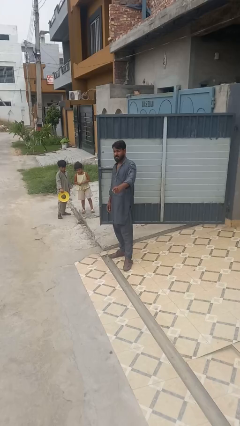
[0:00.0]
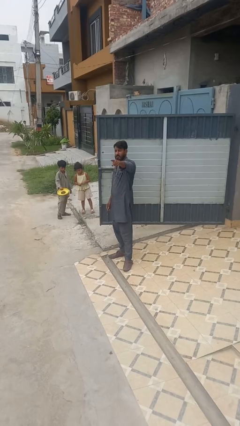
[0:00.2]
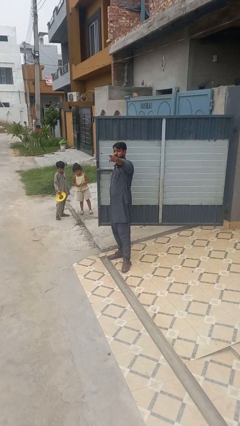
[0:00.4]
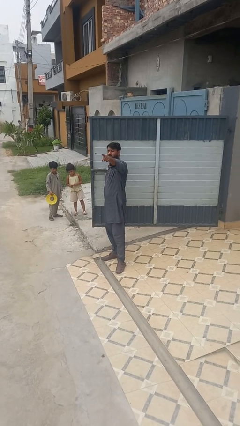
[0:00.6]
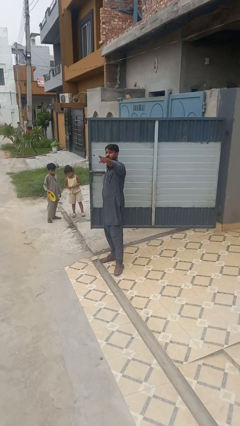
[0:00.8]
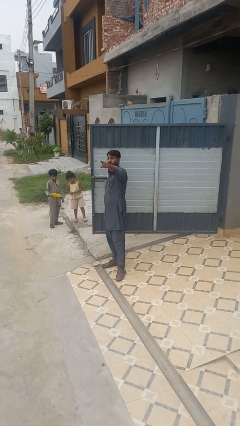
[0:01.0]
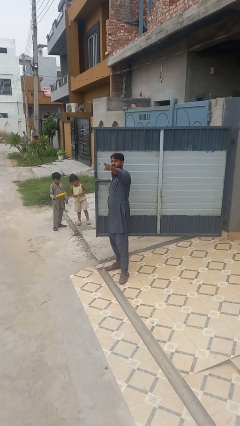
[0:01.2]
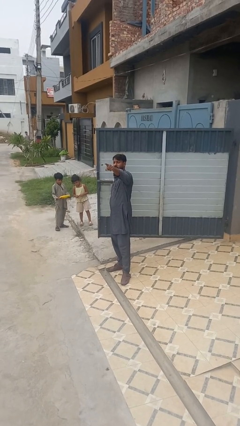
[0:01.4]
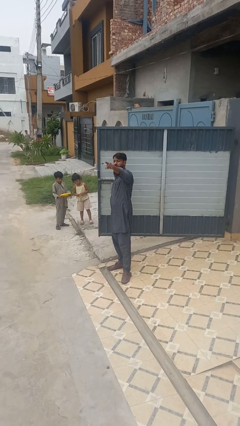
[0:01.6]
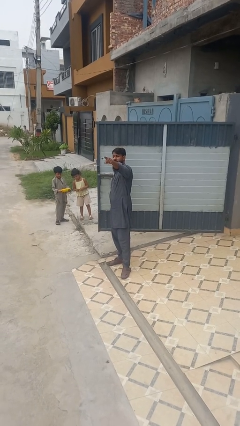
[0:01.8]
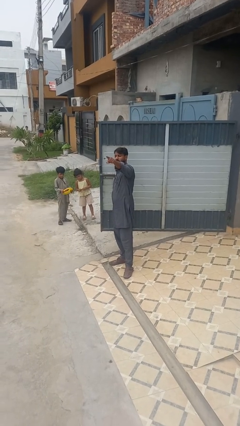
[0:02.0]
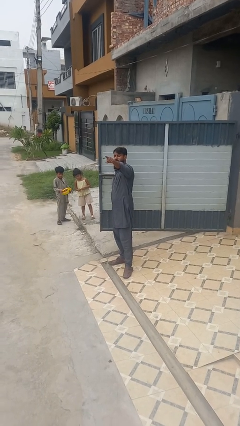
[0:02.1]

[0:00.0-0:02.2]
person points at person

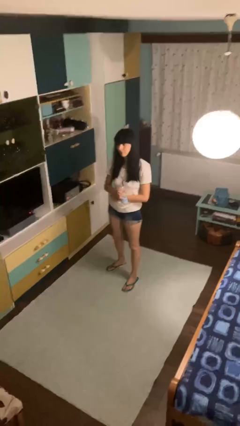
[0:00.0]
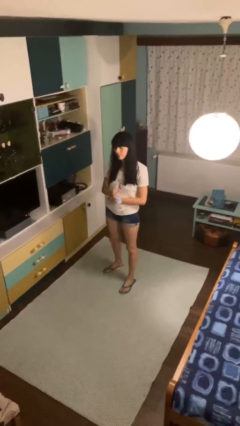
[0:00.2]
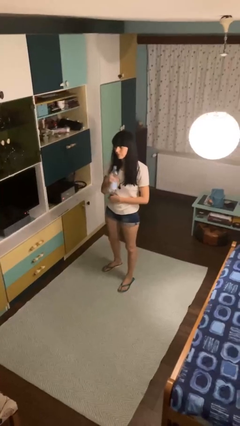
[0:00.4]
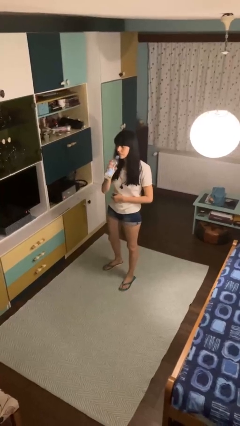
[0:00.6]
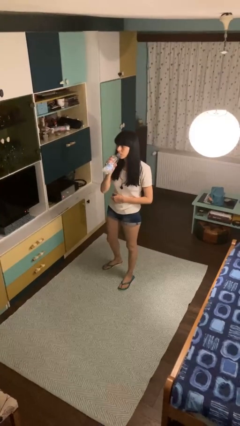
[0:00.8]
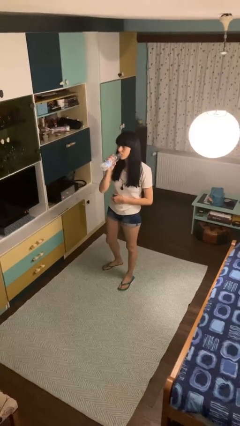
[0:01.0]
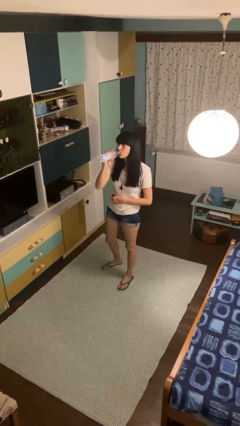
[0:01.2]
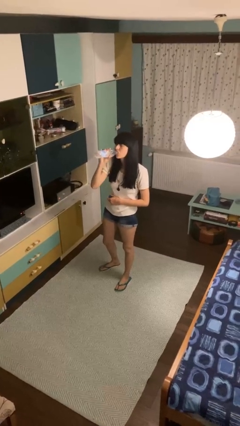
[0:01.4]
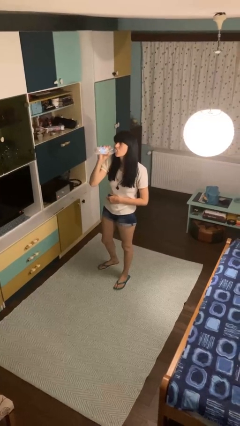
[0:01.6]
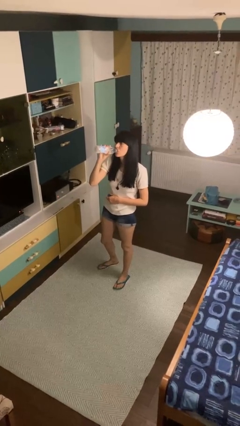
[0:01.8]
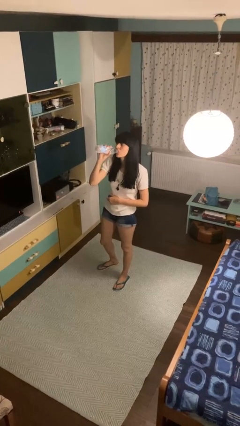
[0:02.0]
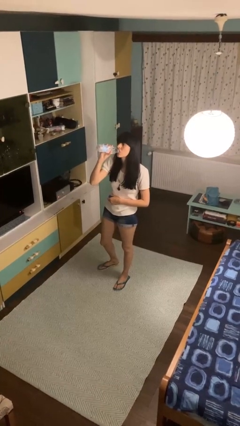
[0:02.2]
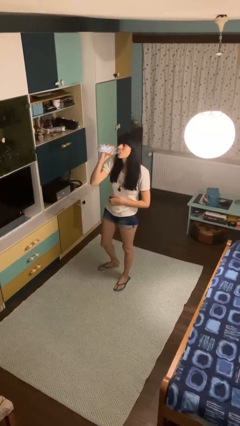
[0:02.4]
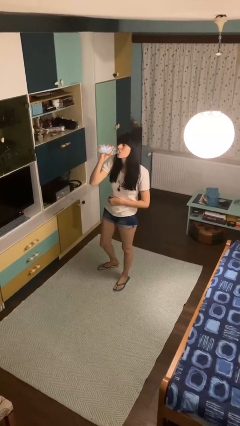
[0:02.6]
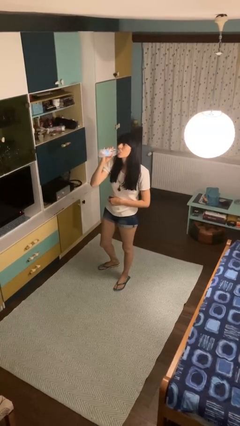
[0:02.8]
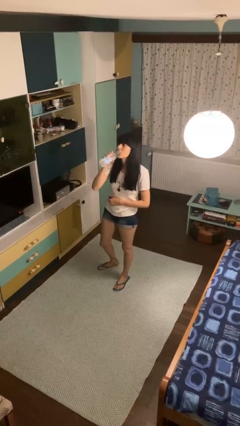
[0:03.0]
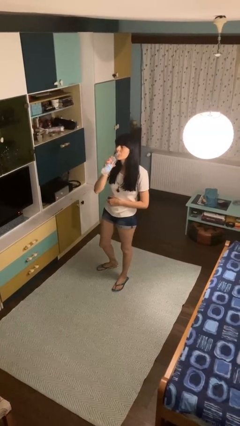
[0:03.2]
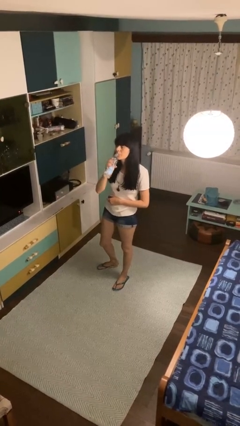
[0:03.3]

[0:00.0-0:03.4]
person drinks from bottle

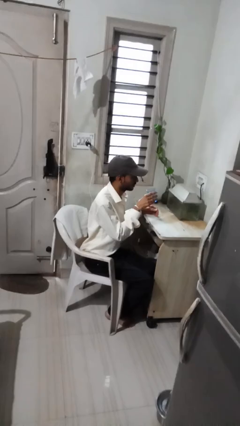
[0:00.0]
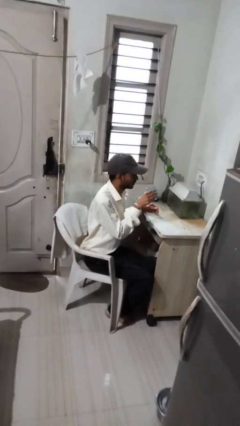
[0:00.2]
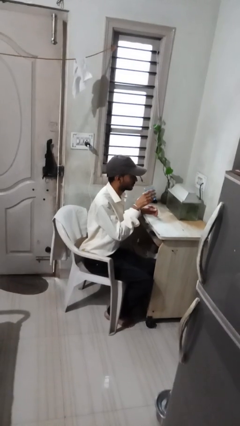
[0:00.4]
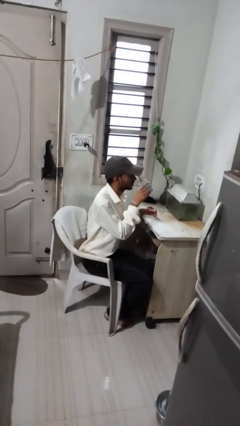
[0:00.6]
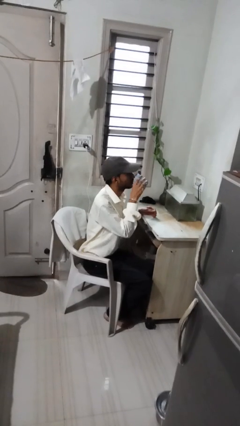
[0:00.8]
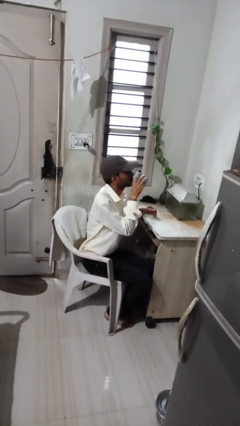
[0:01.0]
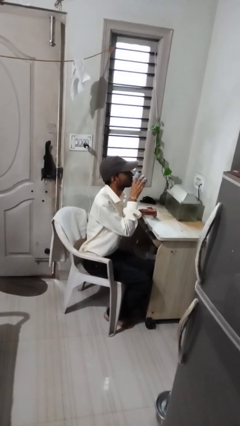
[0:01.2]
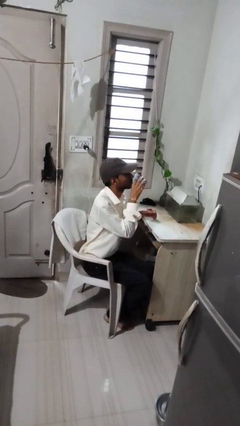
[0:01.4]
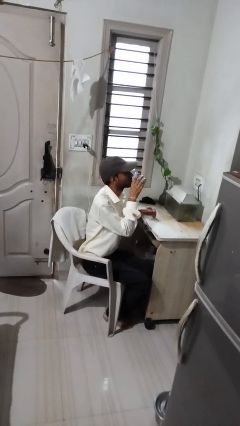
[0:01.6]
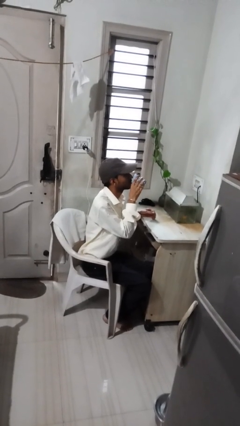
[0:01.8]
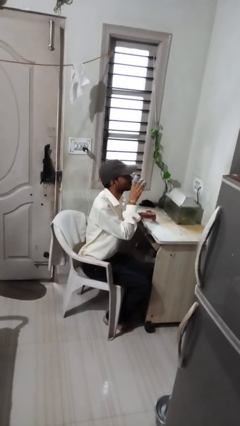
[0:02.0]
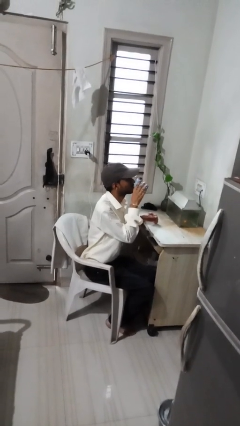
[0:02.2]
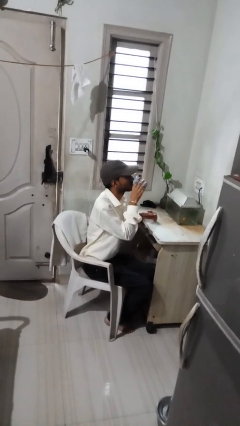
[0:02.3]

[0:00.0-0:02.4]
person drinks from shotglass

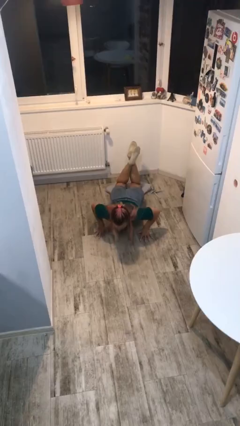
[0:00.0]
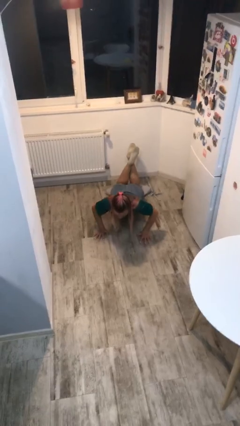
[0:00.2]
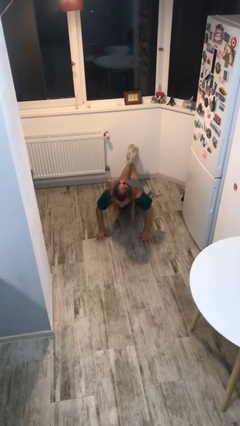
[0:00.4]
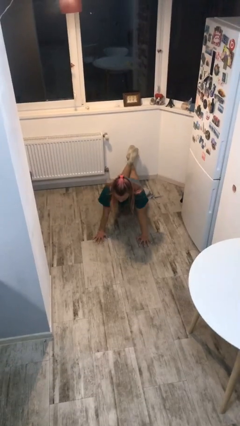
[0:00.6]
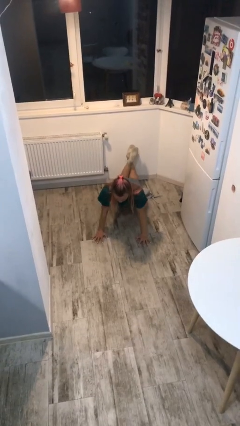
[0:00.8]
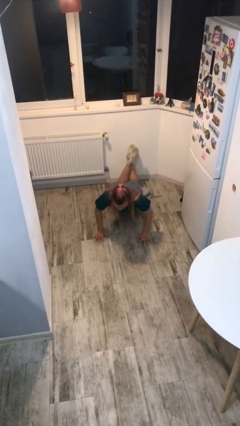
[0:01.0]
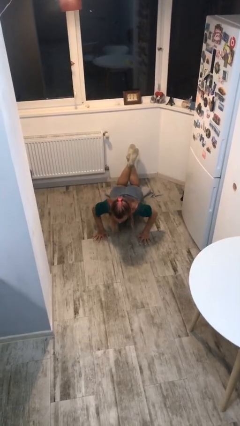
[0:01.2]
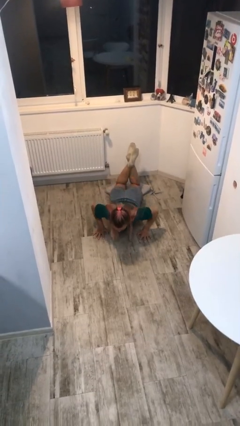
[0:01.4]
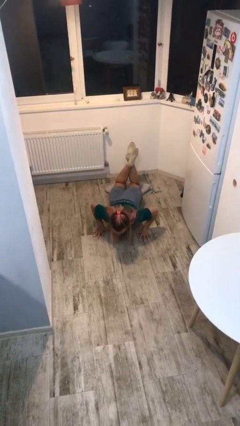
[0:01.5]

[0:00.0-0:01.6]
person exercises with pushup

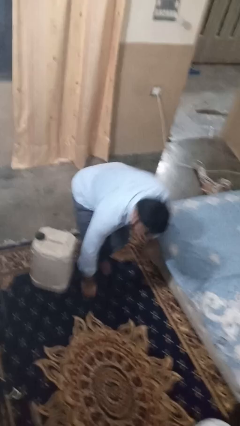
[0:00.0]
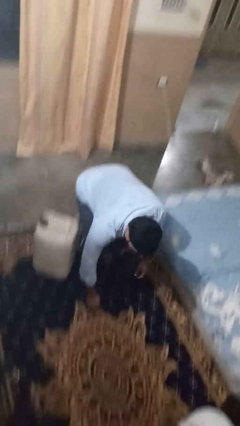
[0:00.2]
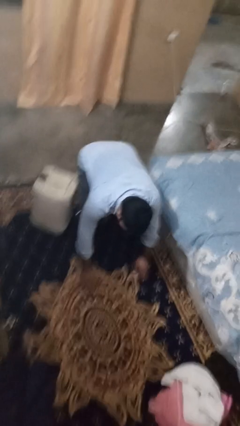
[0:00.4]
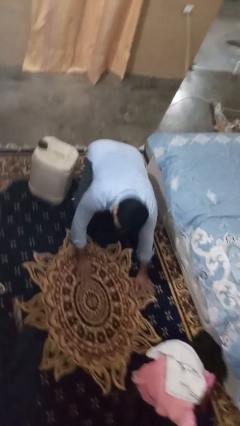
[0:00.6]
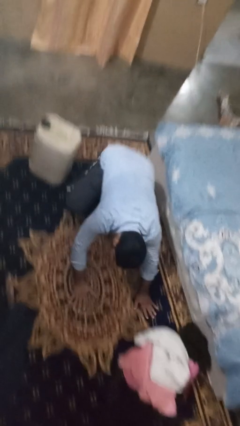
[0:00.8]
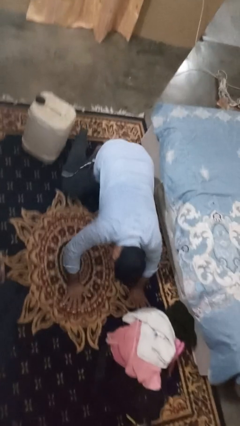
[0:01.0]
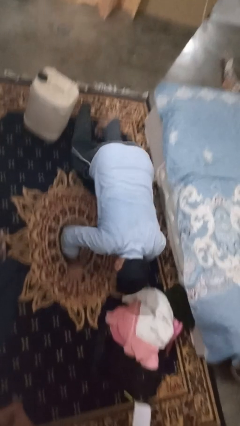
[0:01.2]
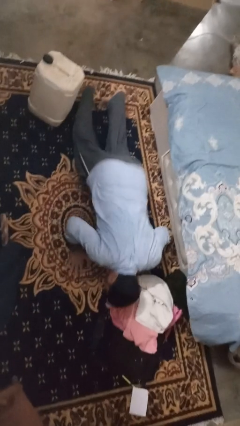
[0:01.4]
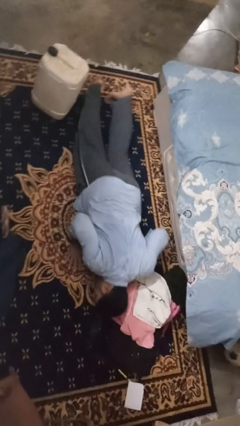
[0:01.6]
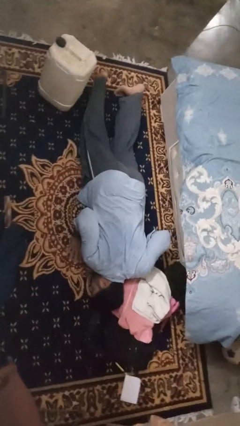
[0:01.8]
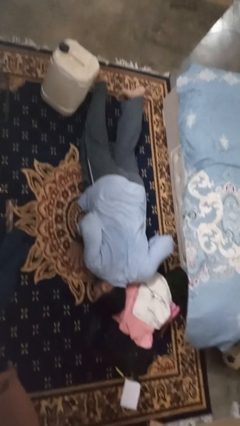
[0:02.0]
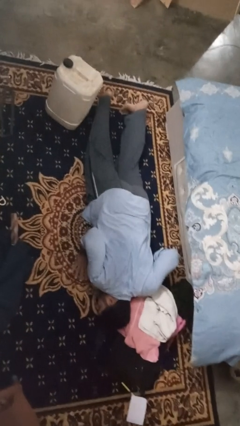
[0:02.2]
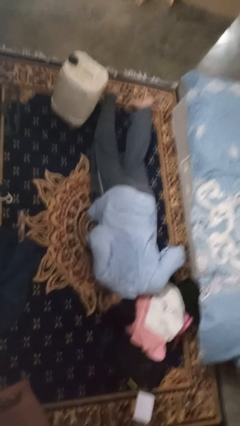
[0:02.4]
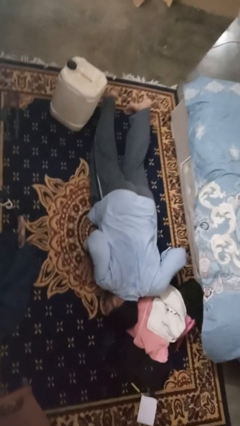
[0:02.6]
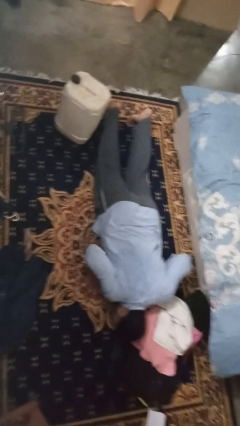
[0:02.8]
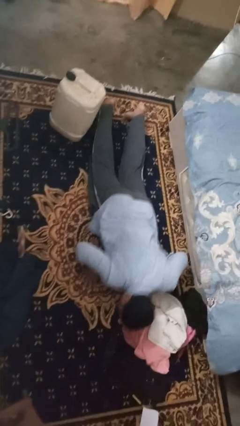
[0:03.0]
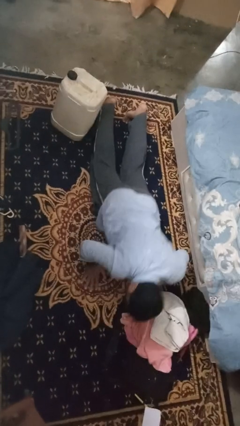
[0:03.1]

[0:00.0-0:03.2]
person lies down on floor

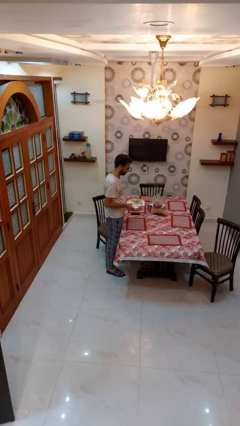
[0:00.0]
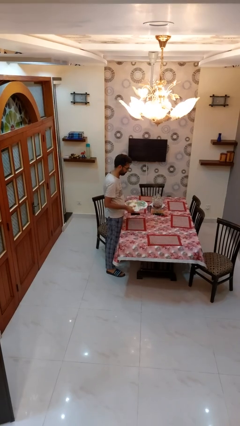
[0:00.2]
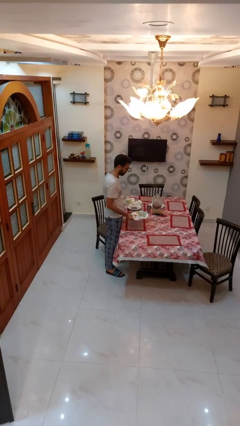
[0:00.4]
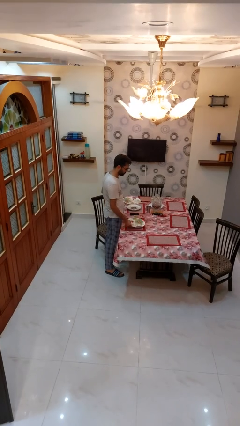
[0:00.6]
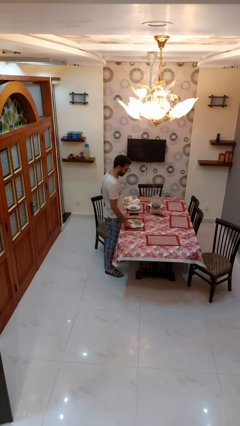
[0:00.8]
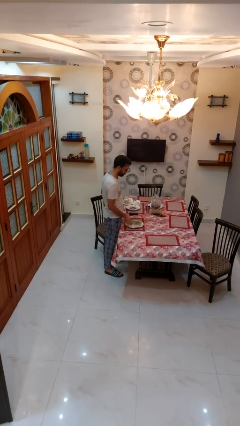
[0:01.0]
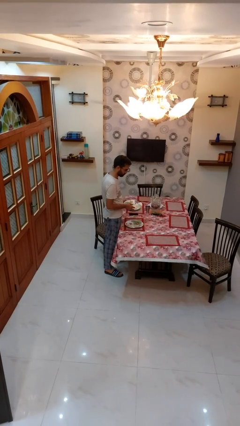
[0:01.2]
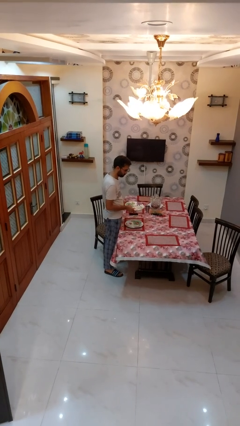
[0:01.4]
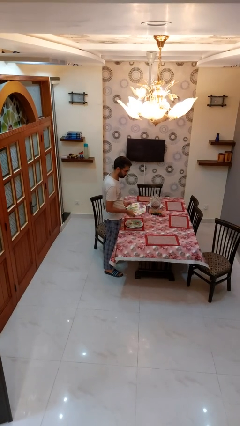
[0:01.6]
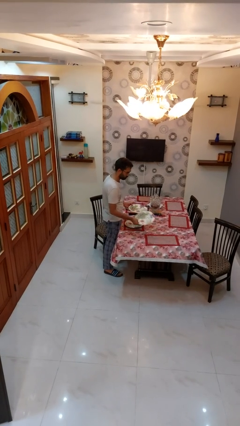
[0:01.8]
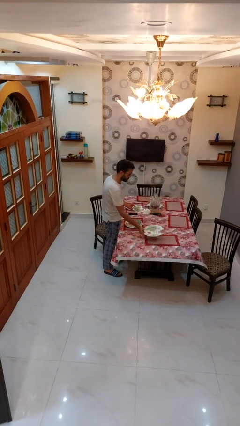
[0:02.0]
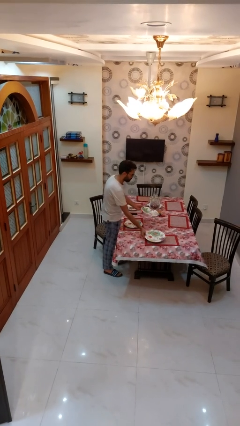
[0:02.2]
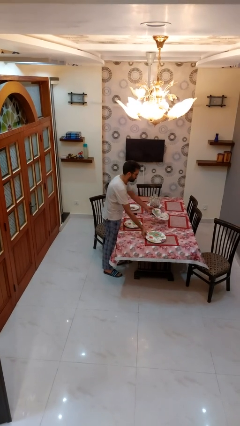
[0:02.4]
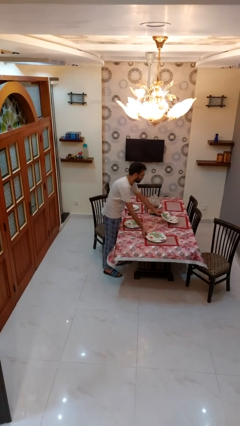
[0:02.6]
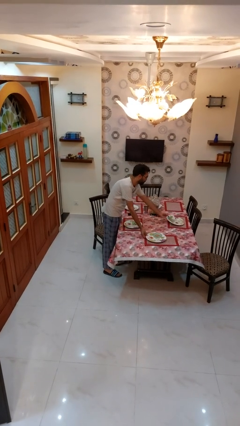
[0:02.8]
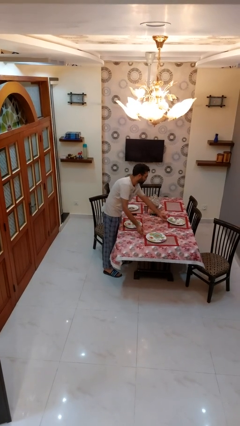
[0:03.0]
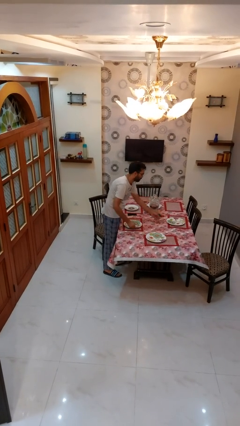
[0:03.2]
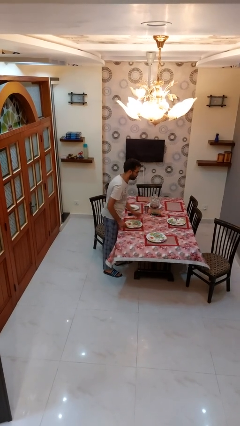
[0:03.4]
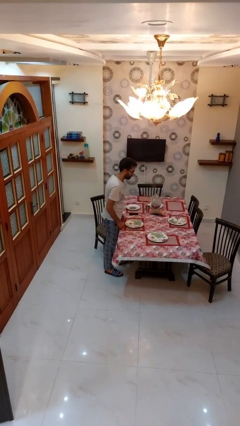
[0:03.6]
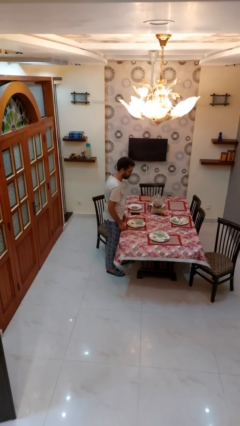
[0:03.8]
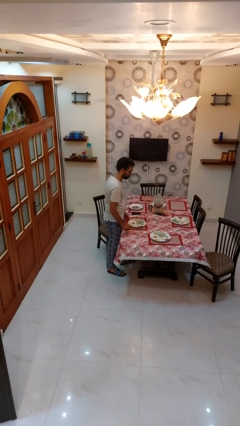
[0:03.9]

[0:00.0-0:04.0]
person sets table

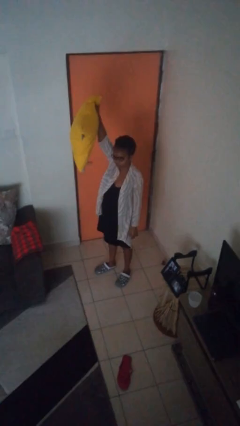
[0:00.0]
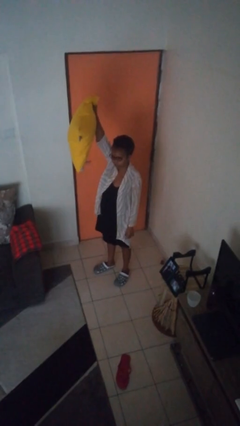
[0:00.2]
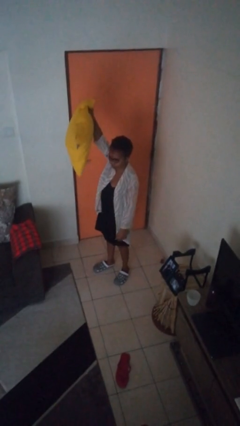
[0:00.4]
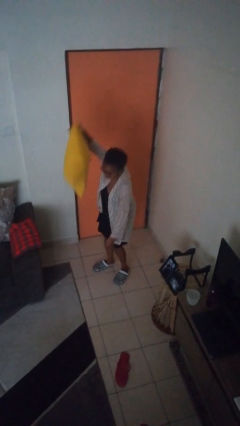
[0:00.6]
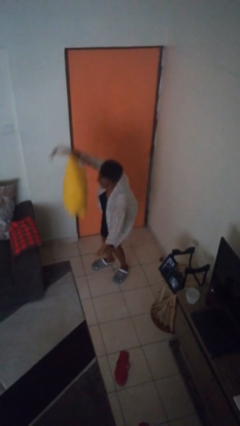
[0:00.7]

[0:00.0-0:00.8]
person drops object
